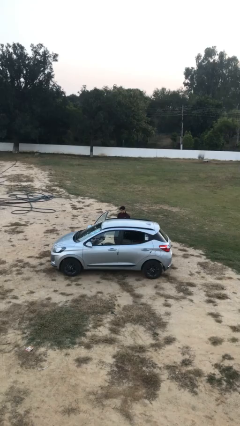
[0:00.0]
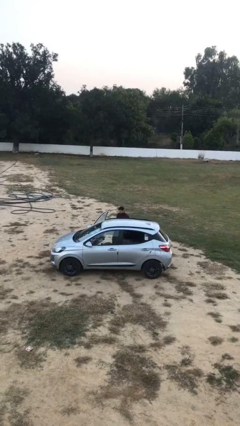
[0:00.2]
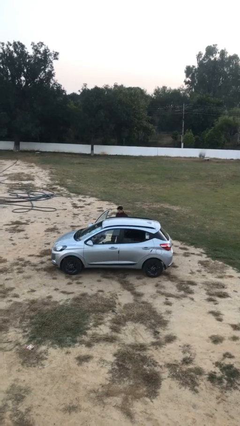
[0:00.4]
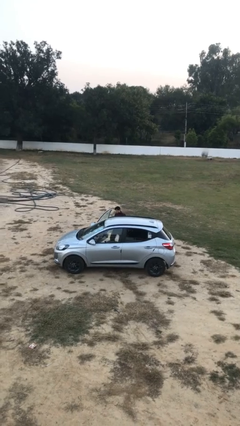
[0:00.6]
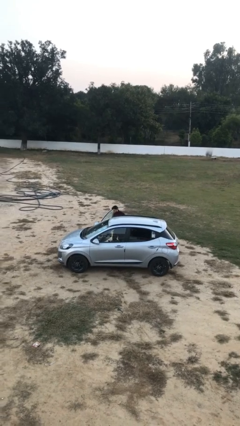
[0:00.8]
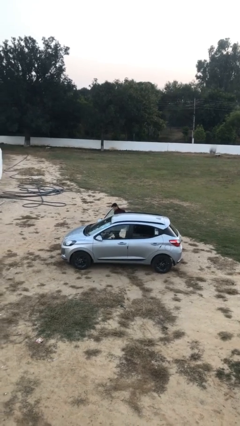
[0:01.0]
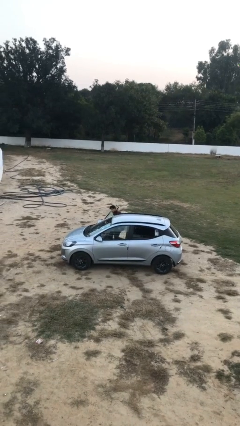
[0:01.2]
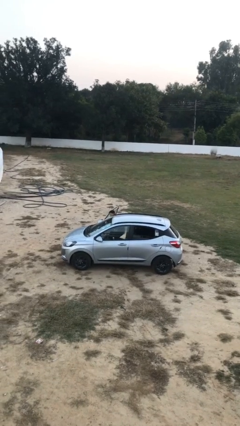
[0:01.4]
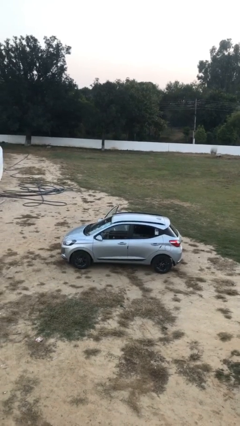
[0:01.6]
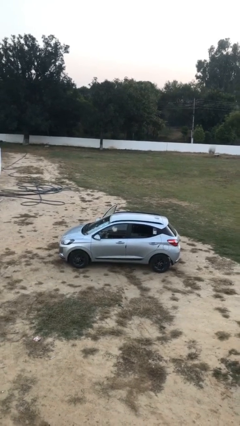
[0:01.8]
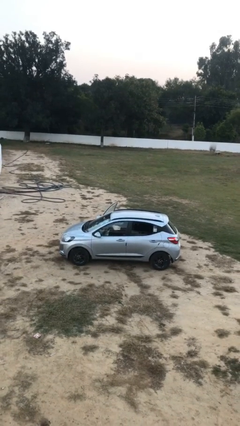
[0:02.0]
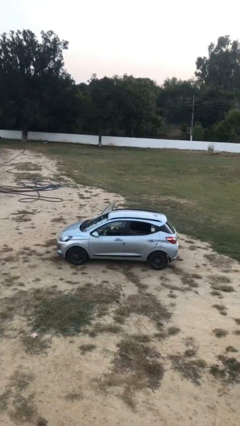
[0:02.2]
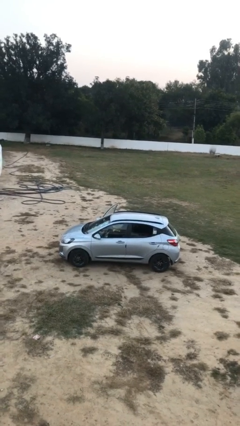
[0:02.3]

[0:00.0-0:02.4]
person enters car

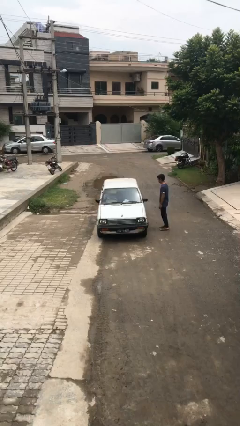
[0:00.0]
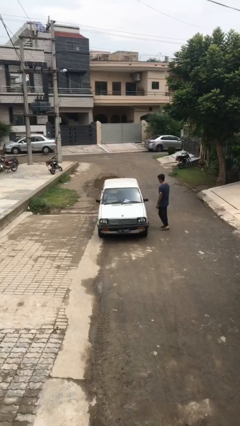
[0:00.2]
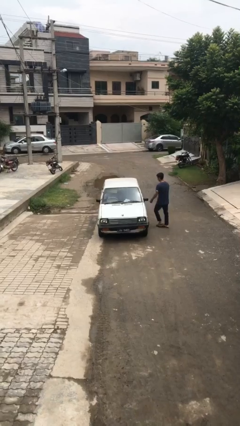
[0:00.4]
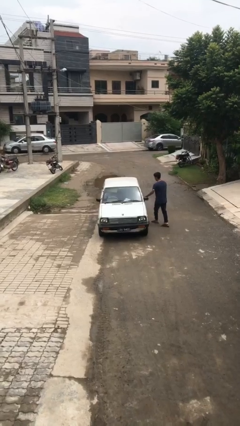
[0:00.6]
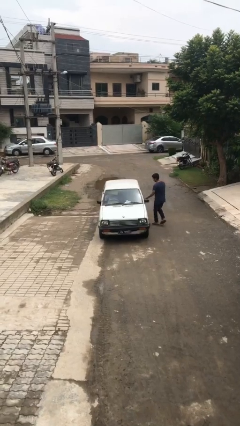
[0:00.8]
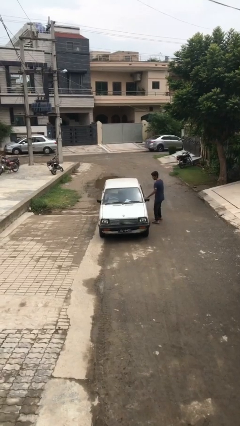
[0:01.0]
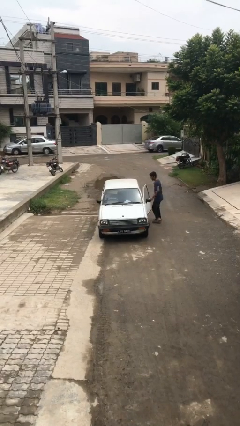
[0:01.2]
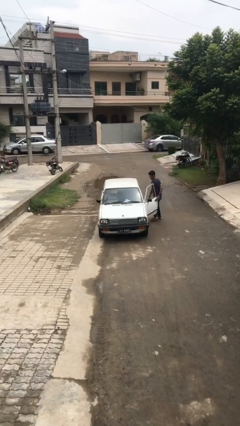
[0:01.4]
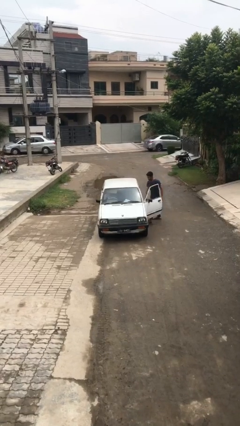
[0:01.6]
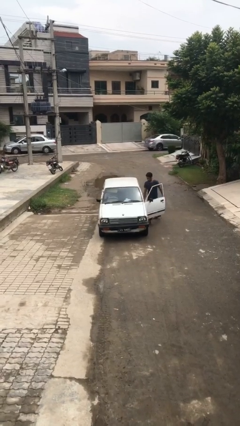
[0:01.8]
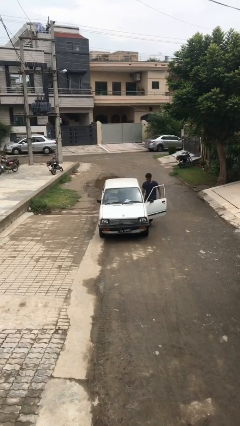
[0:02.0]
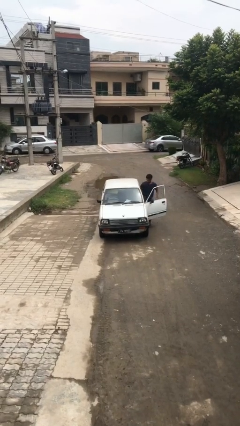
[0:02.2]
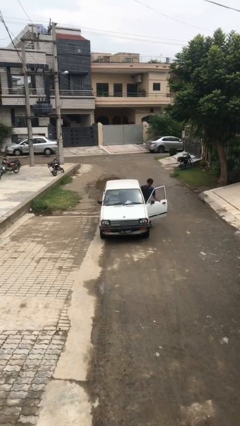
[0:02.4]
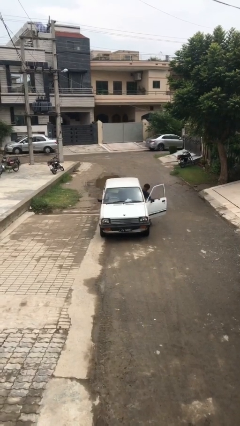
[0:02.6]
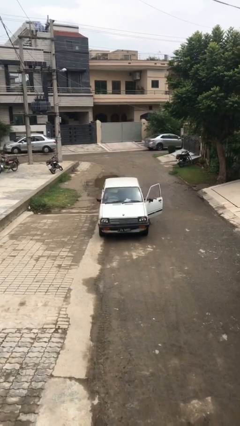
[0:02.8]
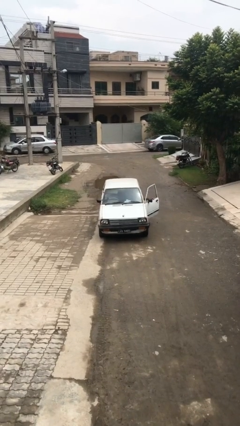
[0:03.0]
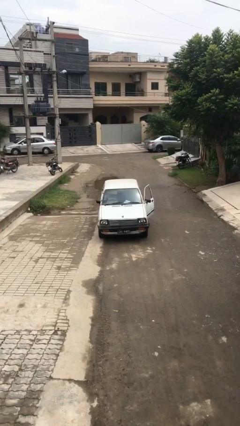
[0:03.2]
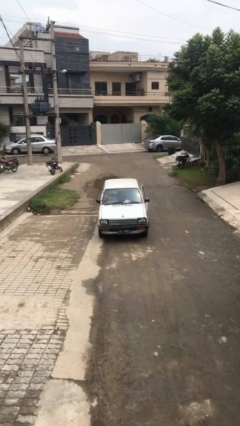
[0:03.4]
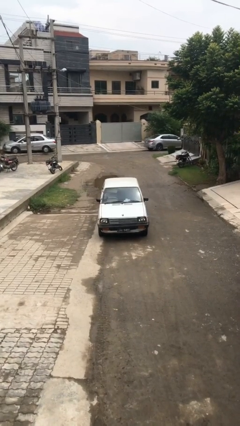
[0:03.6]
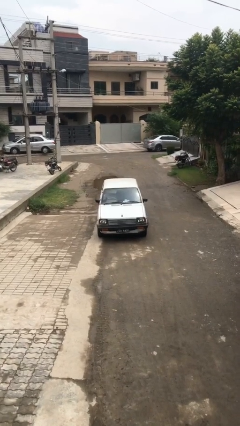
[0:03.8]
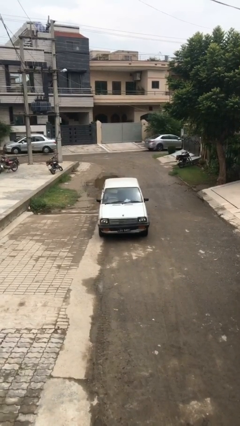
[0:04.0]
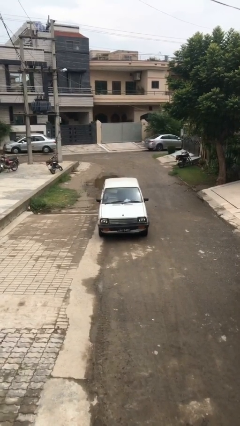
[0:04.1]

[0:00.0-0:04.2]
car picks up person

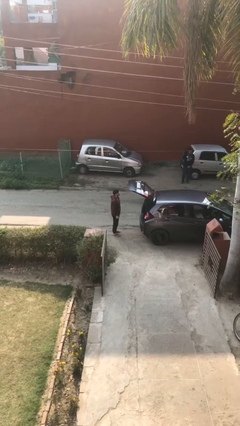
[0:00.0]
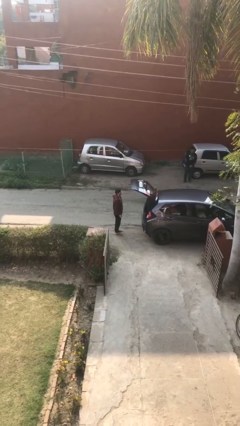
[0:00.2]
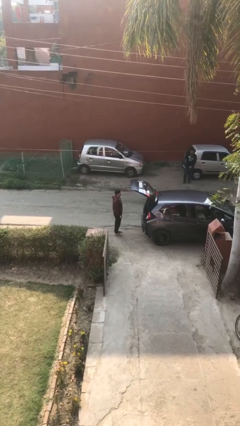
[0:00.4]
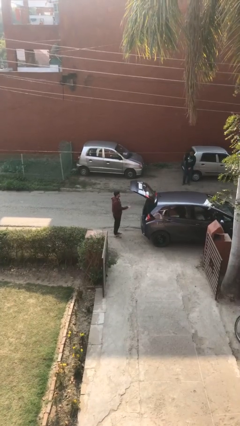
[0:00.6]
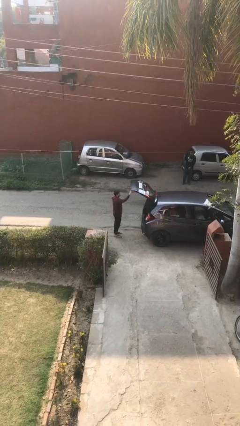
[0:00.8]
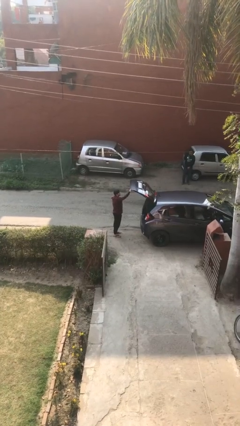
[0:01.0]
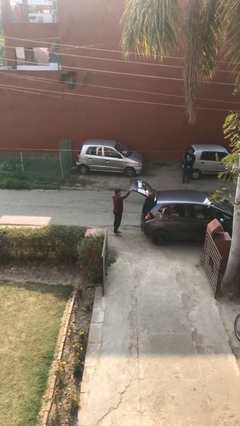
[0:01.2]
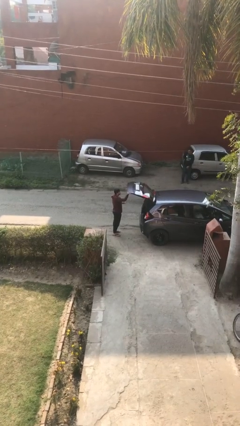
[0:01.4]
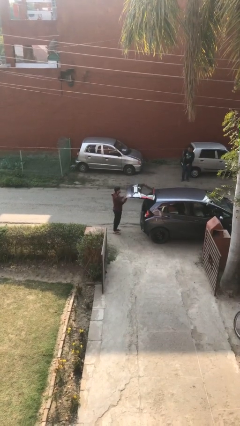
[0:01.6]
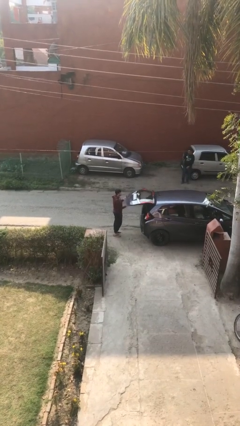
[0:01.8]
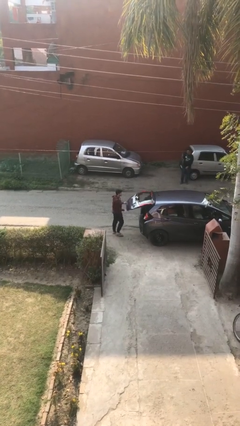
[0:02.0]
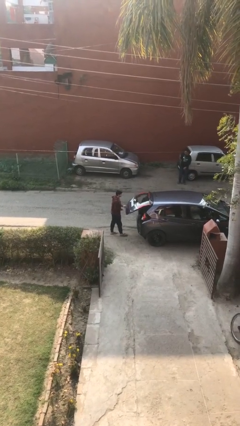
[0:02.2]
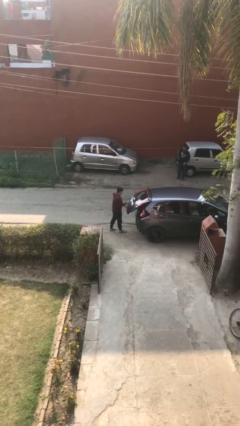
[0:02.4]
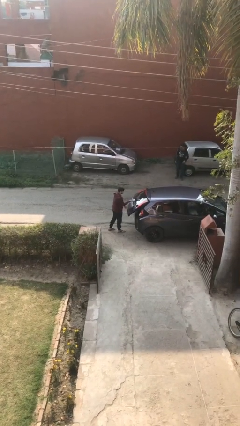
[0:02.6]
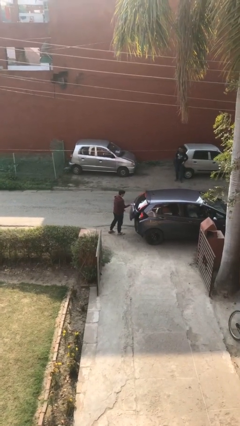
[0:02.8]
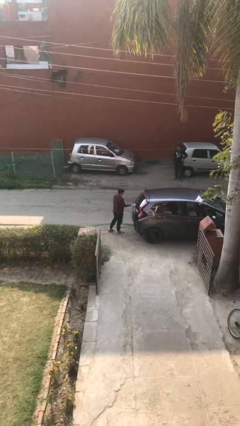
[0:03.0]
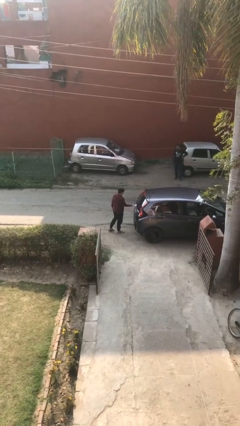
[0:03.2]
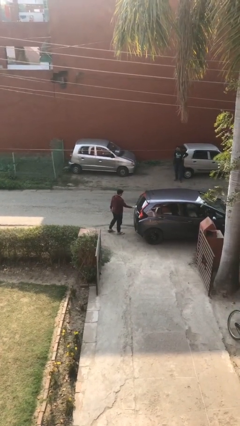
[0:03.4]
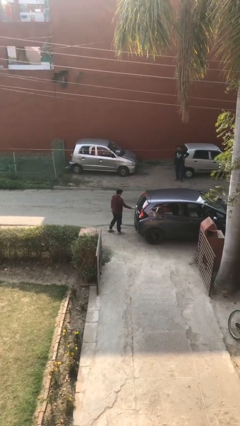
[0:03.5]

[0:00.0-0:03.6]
person closes car trunk

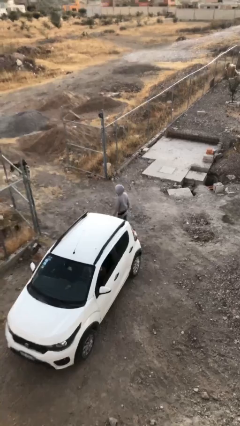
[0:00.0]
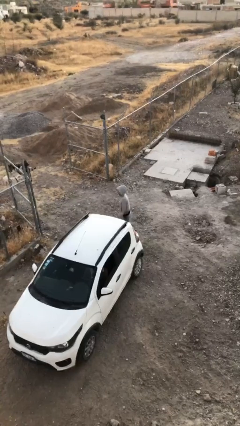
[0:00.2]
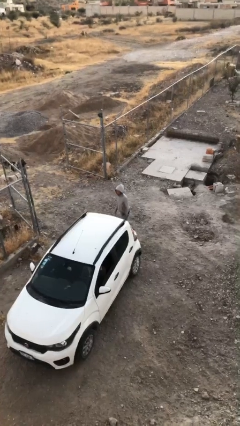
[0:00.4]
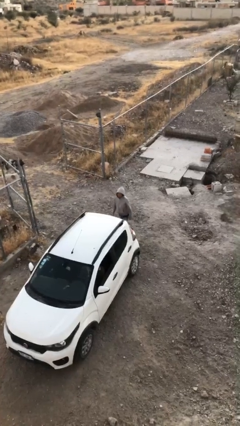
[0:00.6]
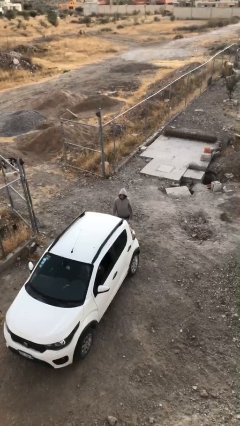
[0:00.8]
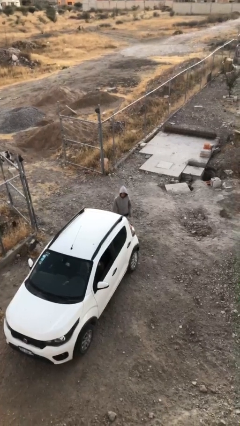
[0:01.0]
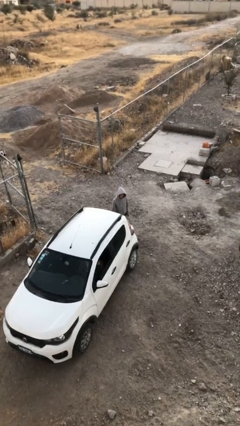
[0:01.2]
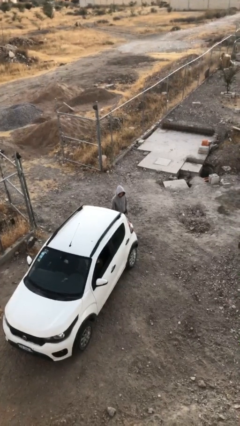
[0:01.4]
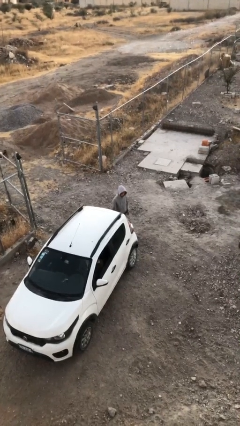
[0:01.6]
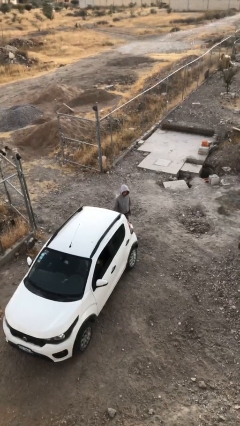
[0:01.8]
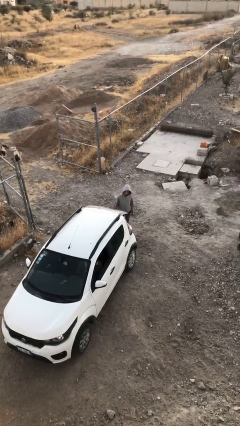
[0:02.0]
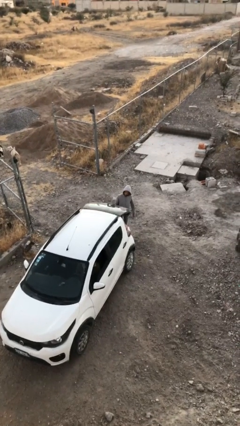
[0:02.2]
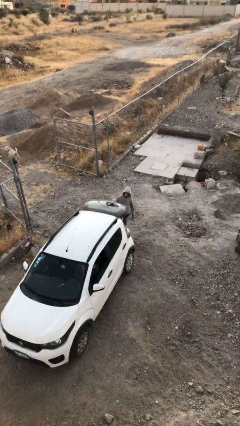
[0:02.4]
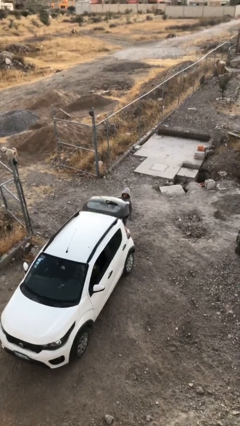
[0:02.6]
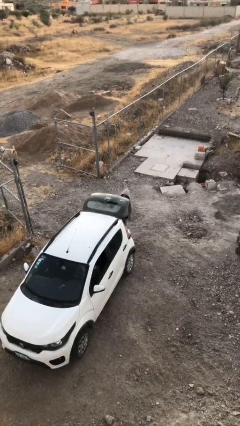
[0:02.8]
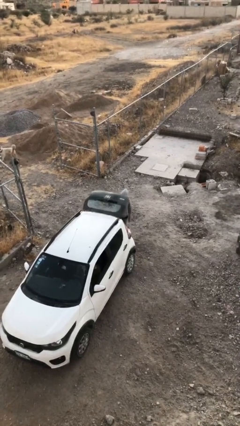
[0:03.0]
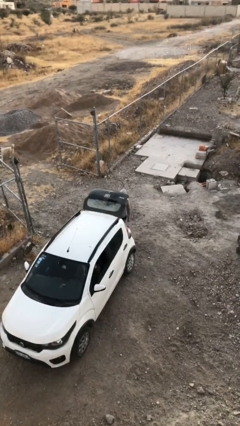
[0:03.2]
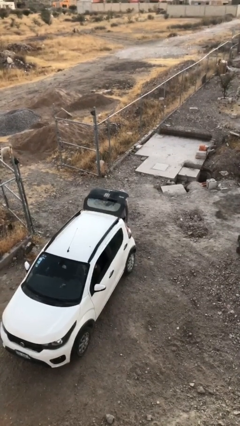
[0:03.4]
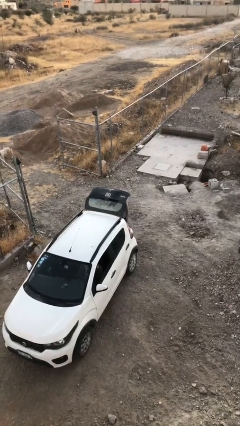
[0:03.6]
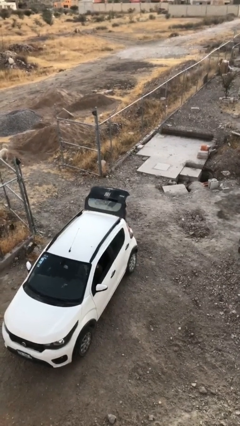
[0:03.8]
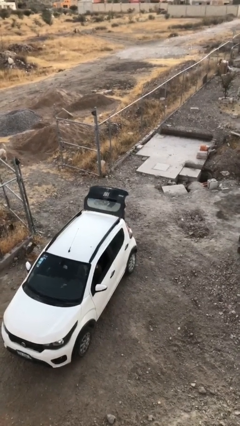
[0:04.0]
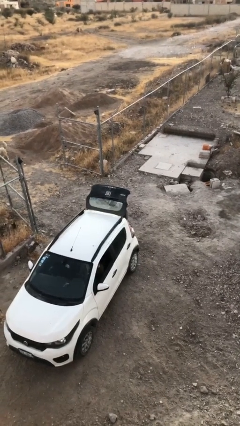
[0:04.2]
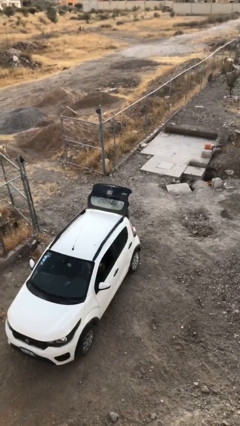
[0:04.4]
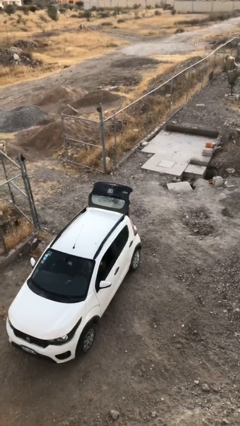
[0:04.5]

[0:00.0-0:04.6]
person opens car trunk

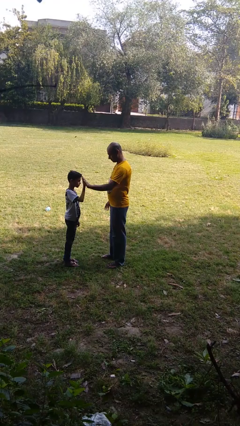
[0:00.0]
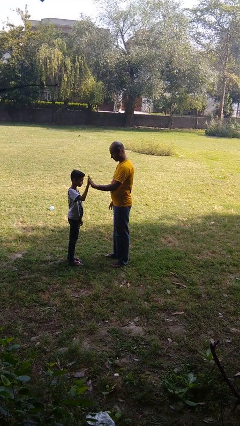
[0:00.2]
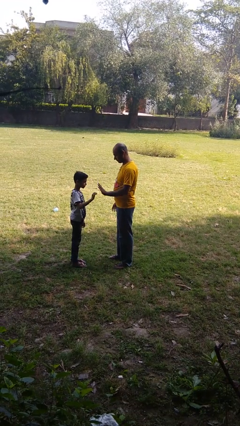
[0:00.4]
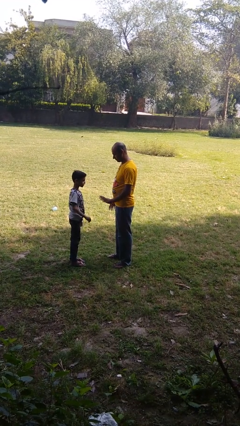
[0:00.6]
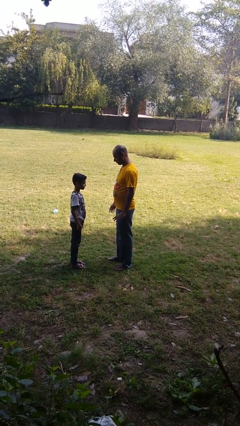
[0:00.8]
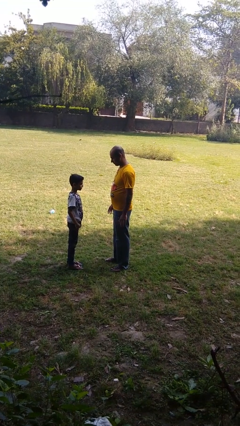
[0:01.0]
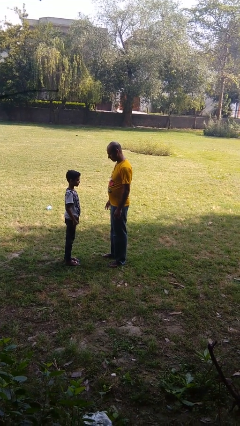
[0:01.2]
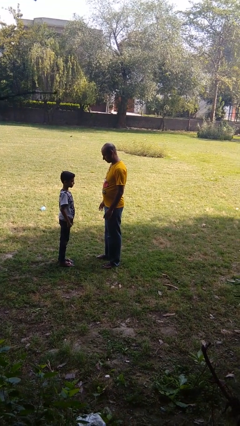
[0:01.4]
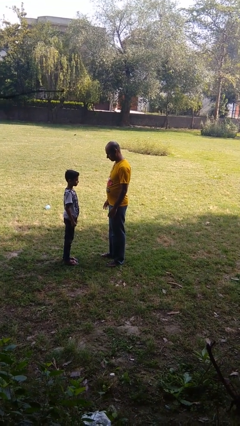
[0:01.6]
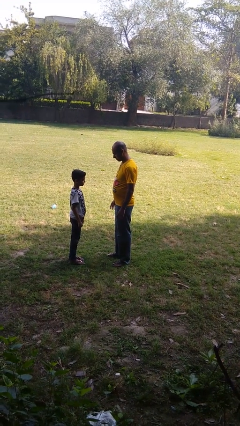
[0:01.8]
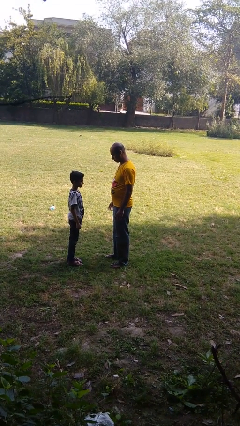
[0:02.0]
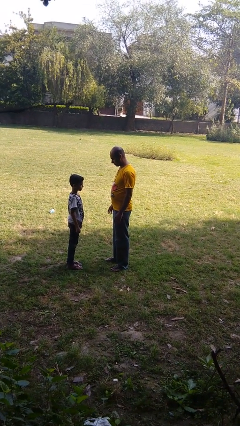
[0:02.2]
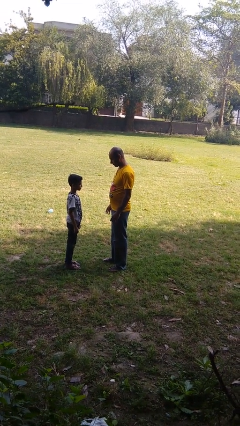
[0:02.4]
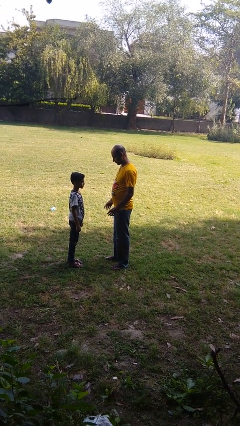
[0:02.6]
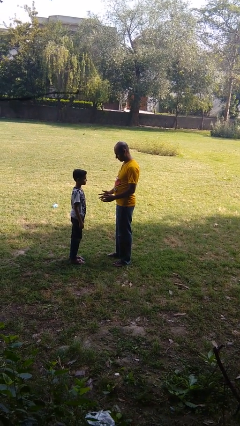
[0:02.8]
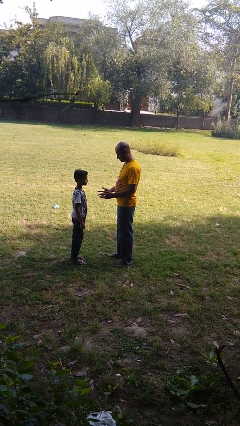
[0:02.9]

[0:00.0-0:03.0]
person highfives hand
